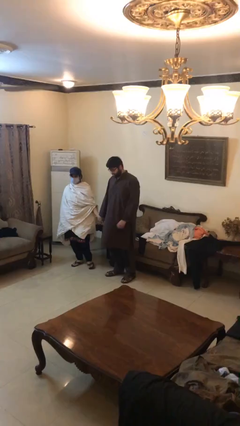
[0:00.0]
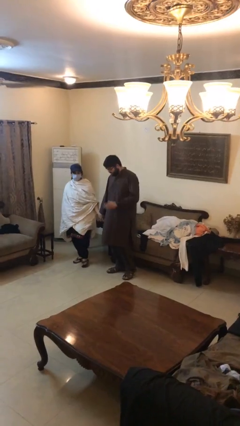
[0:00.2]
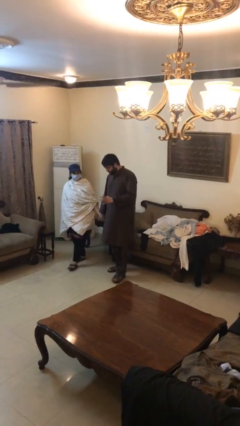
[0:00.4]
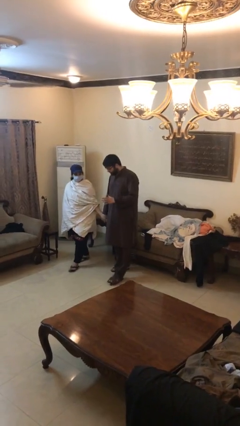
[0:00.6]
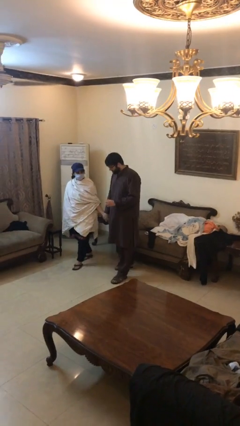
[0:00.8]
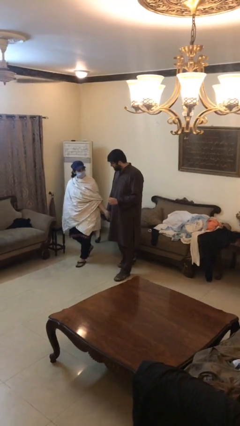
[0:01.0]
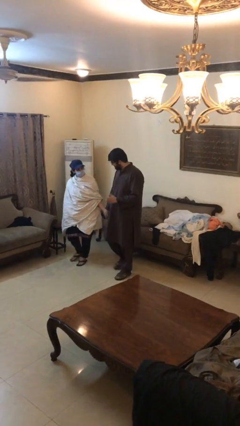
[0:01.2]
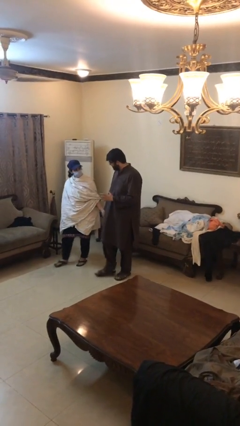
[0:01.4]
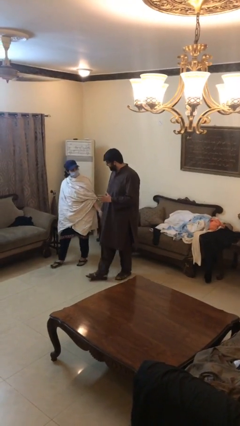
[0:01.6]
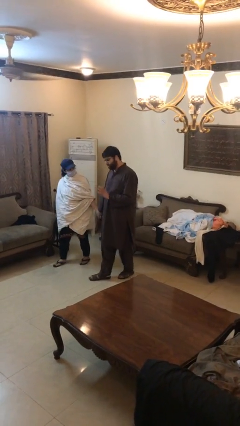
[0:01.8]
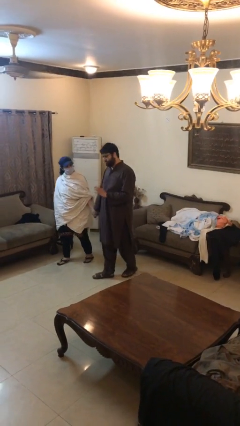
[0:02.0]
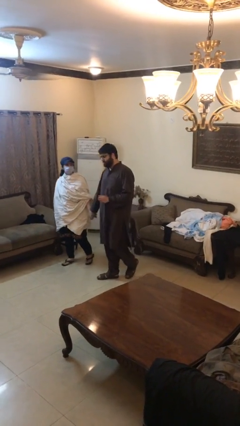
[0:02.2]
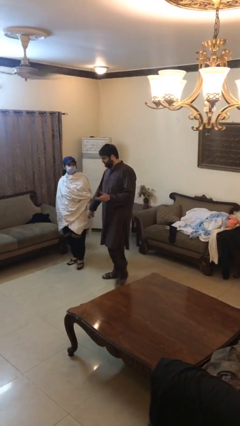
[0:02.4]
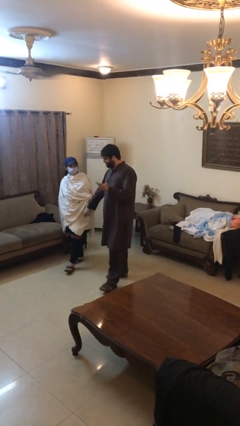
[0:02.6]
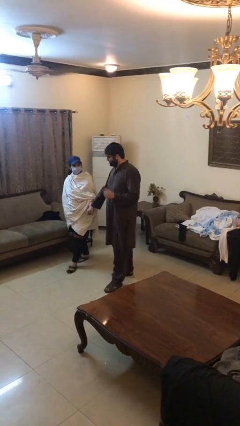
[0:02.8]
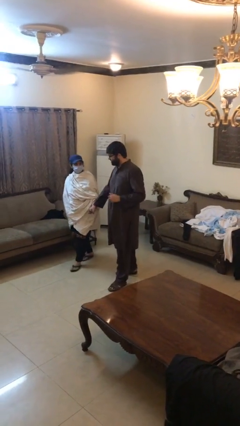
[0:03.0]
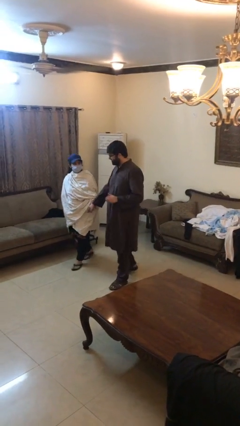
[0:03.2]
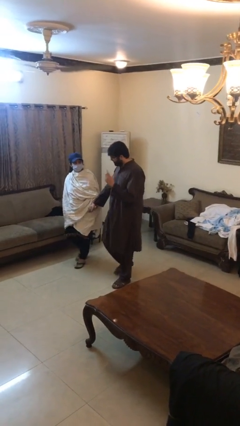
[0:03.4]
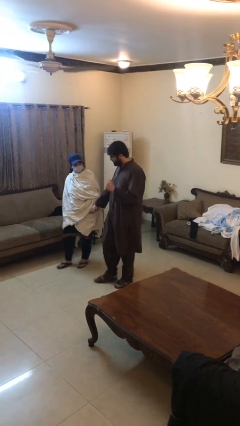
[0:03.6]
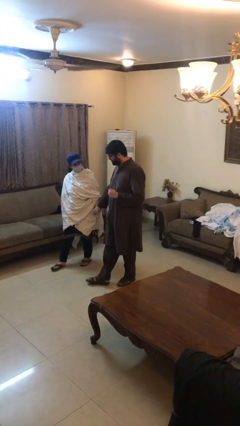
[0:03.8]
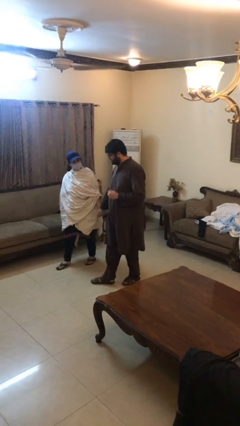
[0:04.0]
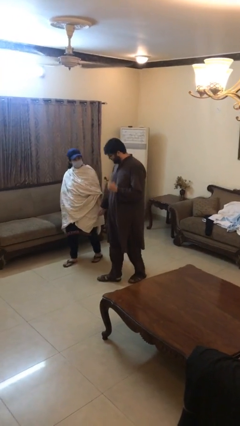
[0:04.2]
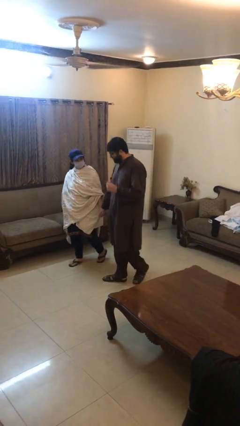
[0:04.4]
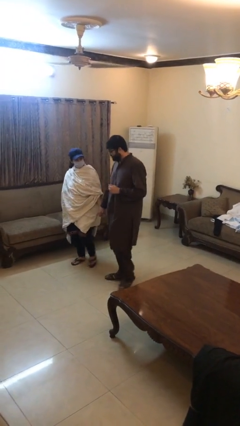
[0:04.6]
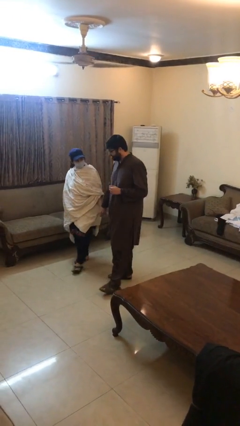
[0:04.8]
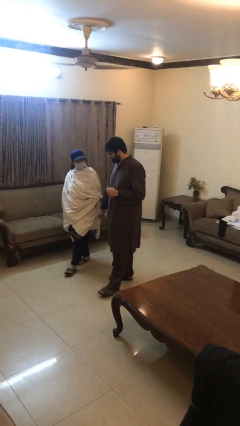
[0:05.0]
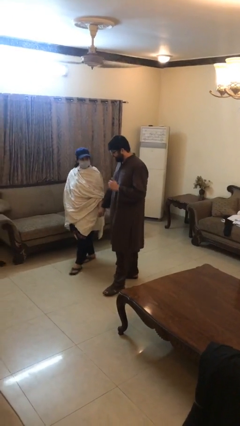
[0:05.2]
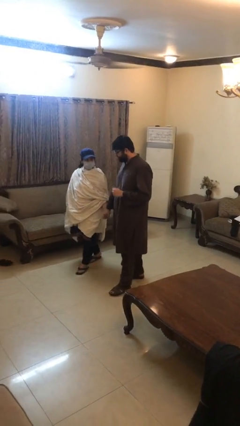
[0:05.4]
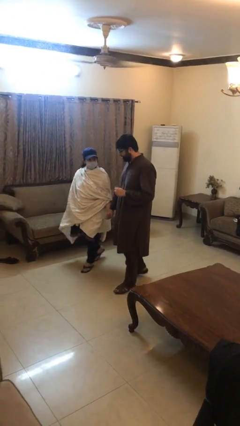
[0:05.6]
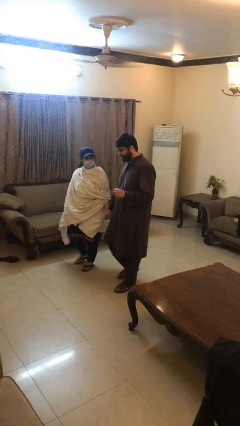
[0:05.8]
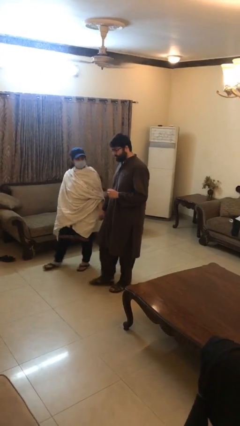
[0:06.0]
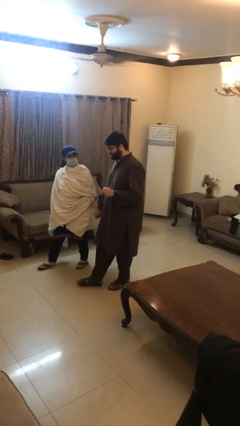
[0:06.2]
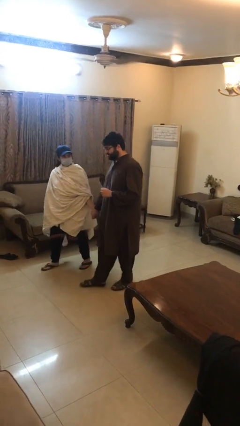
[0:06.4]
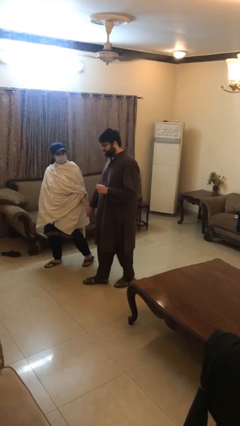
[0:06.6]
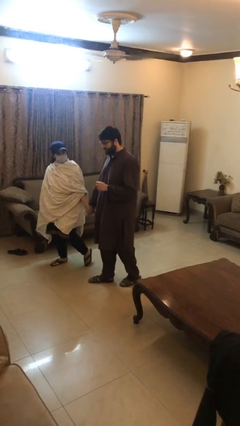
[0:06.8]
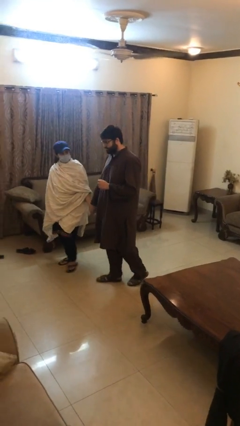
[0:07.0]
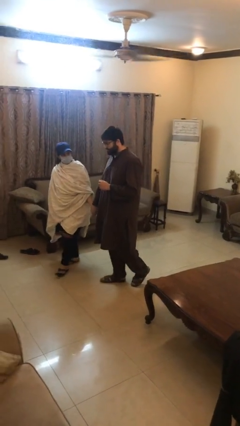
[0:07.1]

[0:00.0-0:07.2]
person holds hand

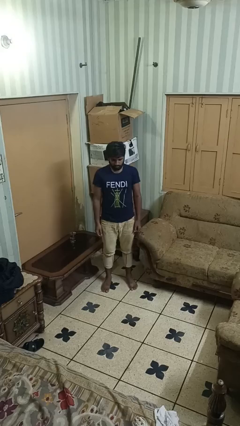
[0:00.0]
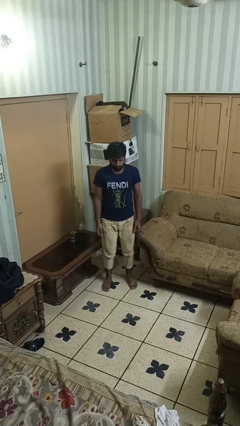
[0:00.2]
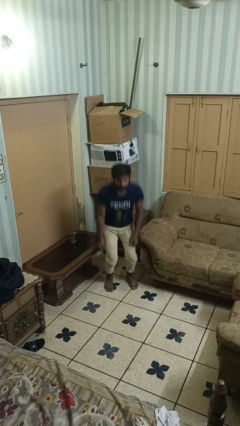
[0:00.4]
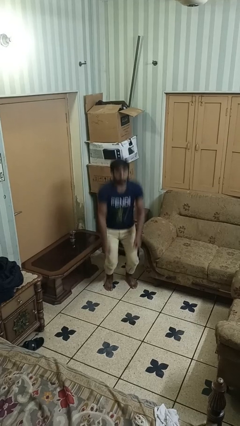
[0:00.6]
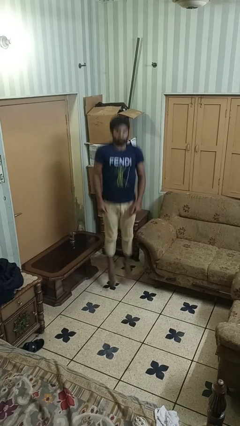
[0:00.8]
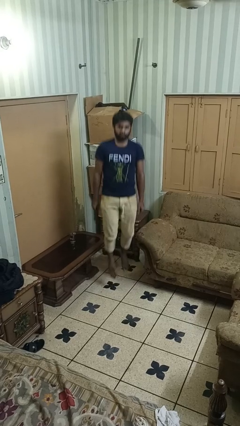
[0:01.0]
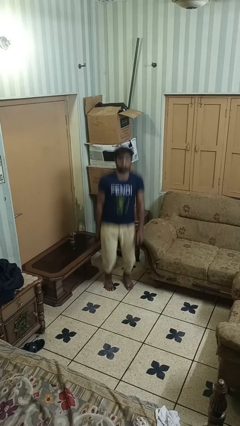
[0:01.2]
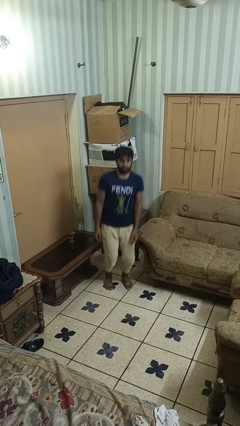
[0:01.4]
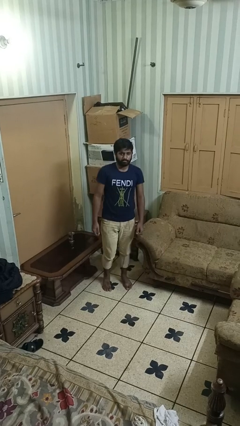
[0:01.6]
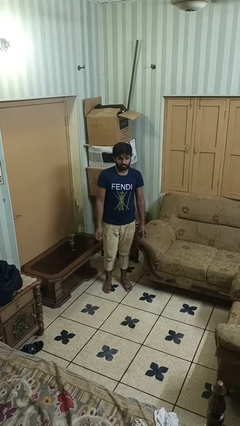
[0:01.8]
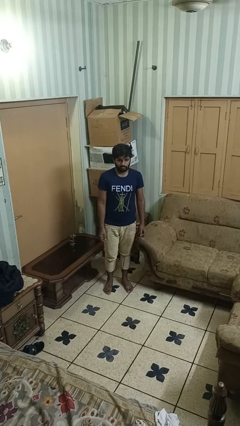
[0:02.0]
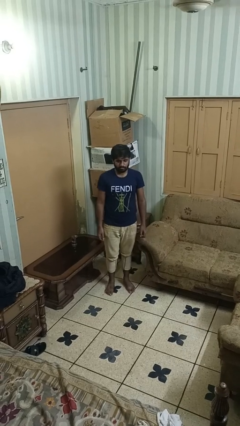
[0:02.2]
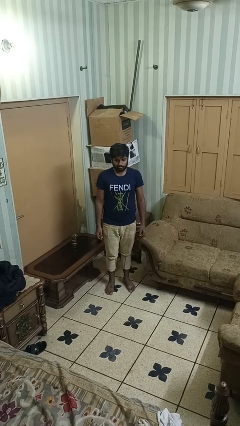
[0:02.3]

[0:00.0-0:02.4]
person jumps

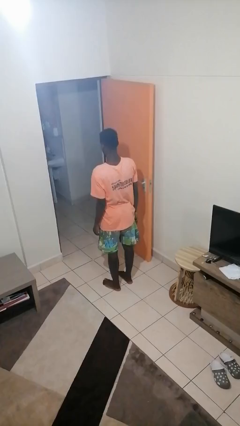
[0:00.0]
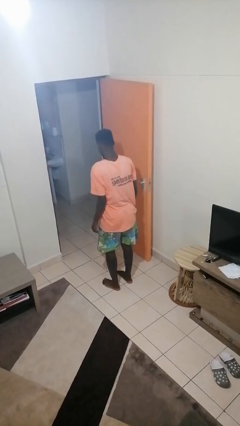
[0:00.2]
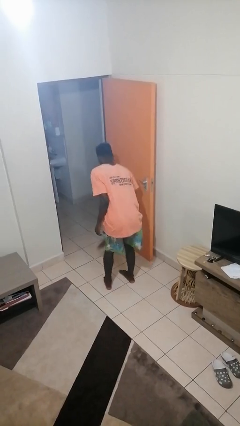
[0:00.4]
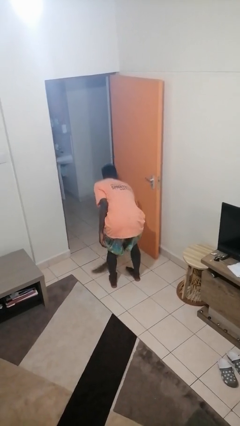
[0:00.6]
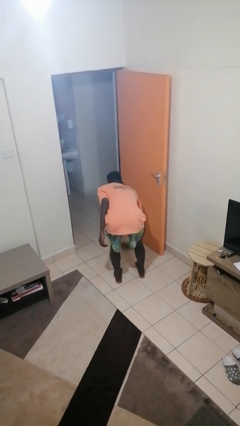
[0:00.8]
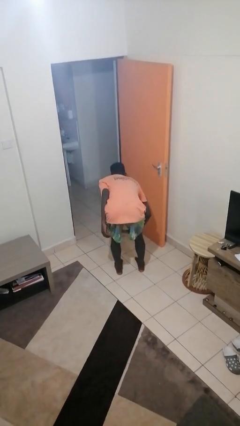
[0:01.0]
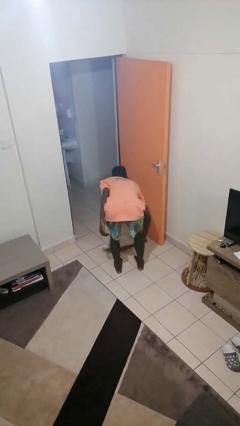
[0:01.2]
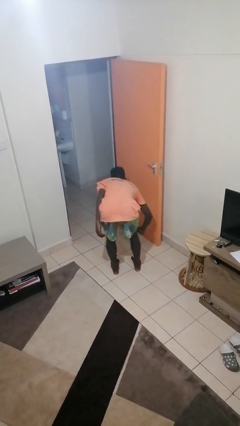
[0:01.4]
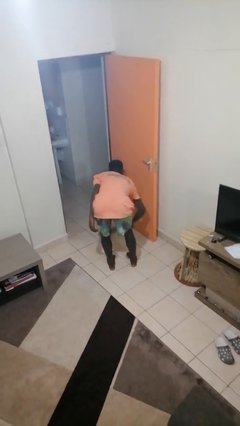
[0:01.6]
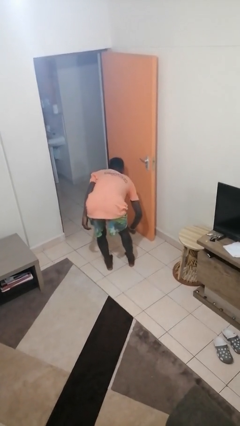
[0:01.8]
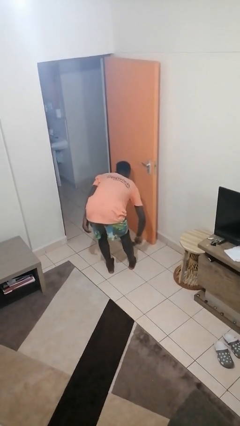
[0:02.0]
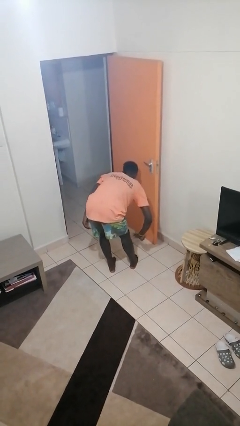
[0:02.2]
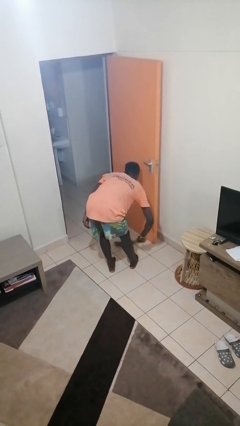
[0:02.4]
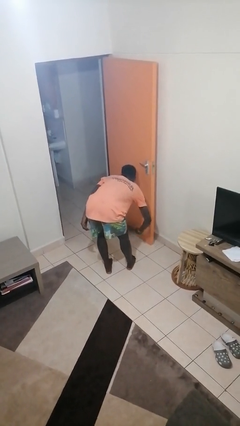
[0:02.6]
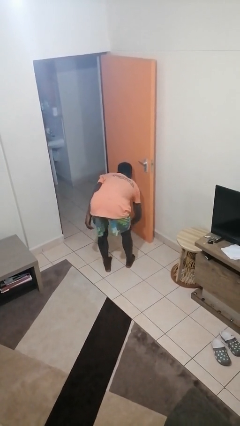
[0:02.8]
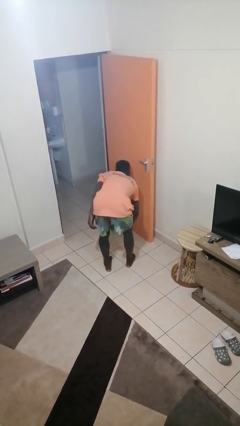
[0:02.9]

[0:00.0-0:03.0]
person sweeps floor

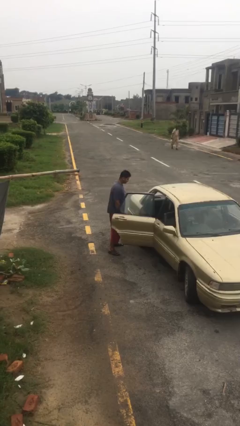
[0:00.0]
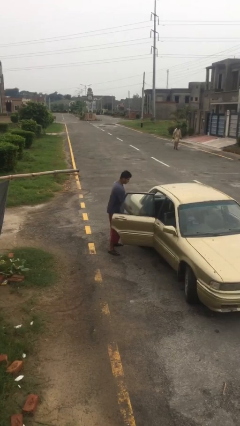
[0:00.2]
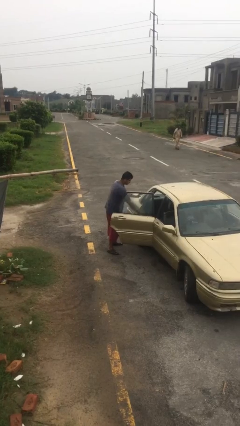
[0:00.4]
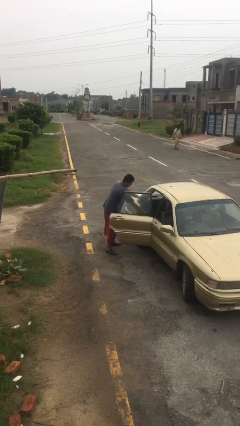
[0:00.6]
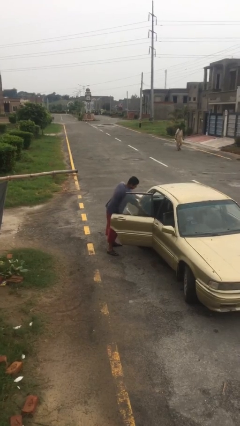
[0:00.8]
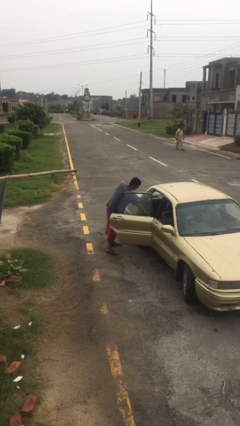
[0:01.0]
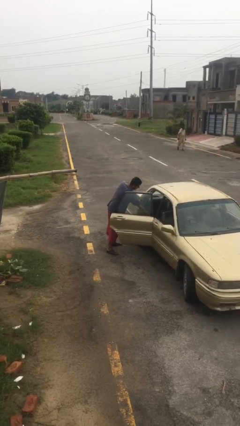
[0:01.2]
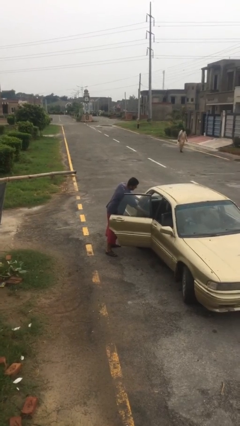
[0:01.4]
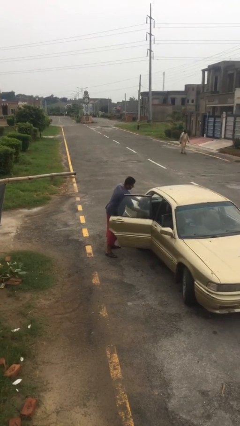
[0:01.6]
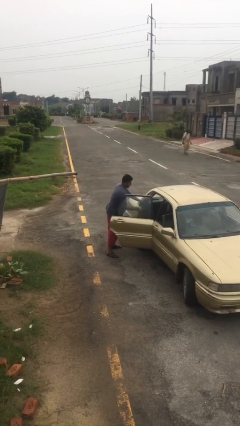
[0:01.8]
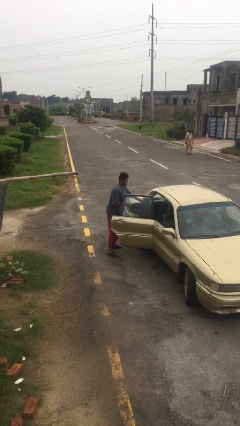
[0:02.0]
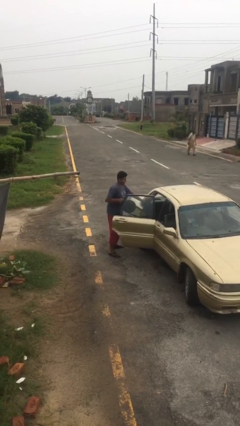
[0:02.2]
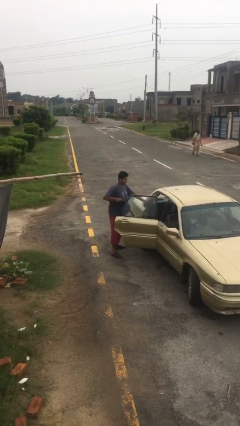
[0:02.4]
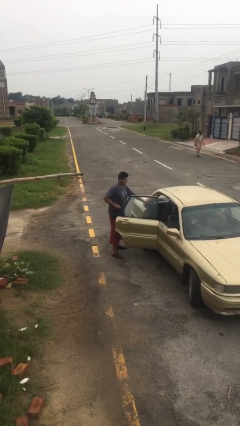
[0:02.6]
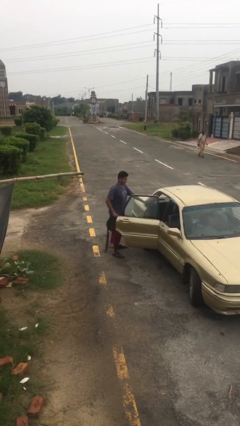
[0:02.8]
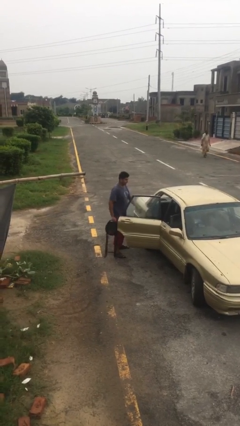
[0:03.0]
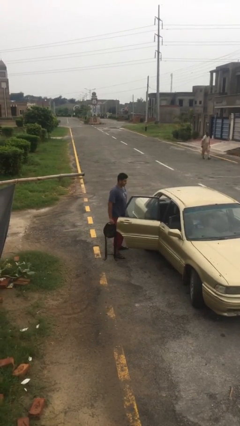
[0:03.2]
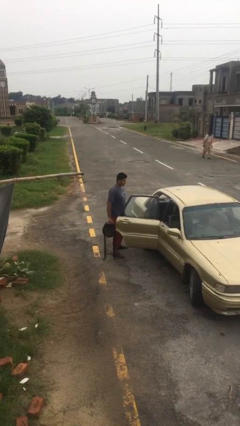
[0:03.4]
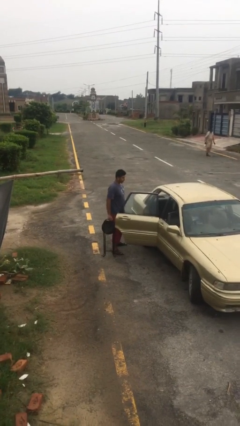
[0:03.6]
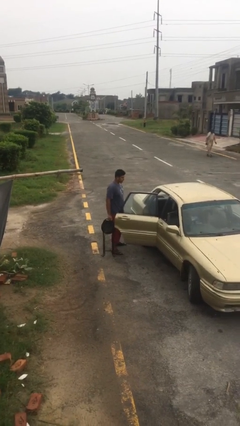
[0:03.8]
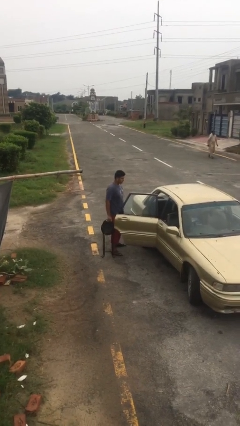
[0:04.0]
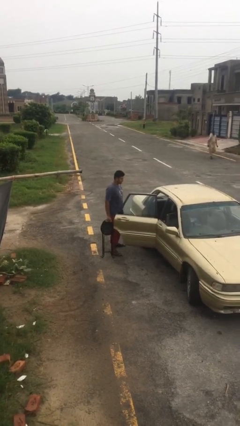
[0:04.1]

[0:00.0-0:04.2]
person unloads car

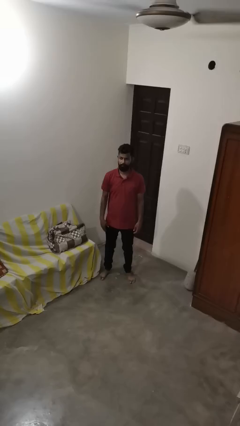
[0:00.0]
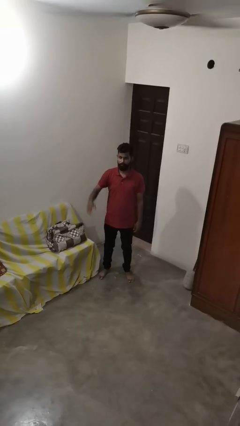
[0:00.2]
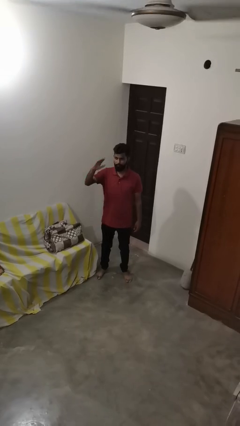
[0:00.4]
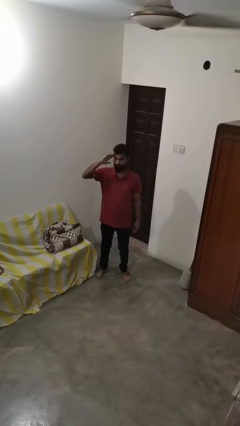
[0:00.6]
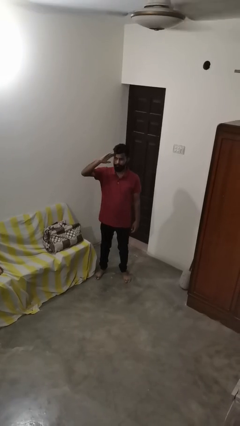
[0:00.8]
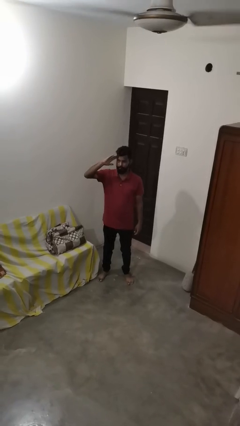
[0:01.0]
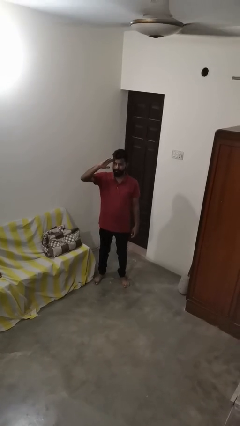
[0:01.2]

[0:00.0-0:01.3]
person salutes
